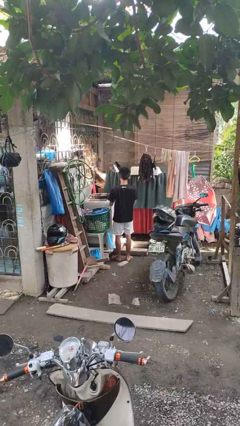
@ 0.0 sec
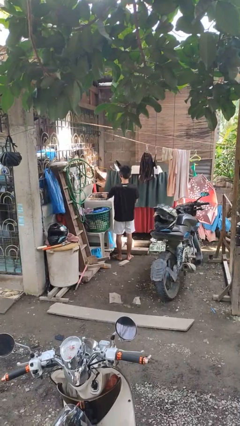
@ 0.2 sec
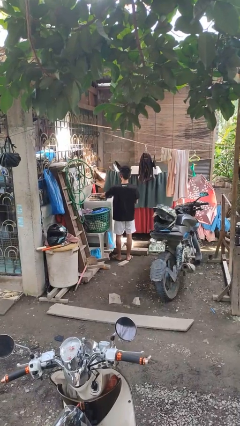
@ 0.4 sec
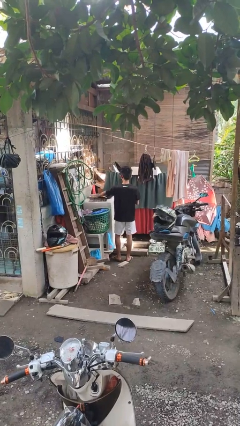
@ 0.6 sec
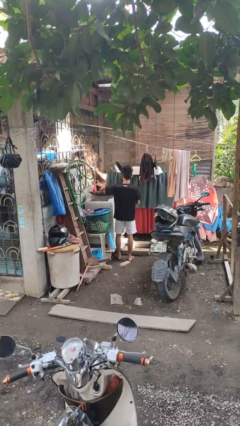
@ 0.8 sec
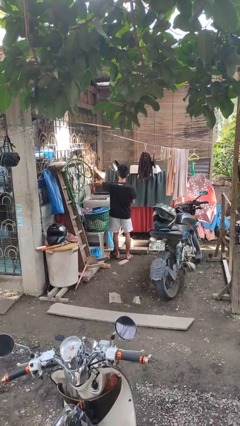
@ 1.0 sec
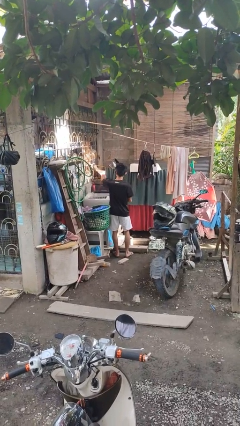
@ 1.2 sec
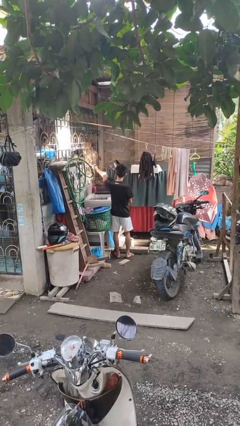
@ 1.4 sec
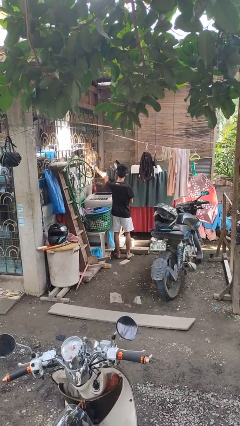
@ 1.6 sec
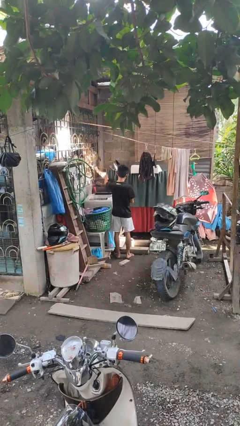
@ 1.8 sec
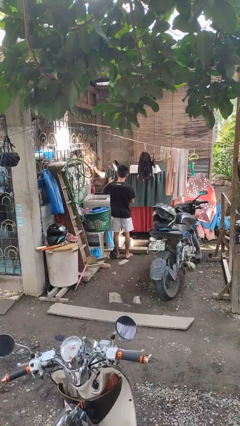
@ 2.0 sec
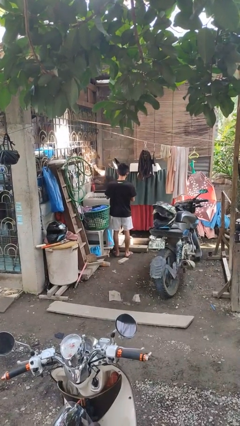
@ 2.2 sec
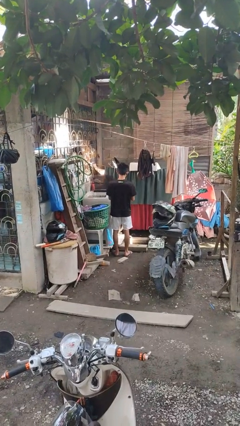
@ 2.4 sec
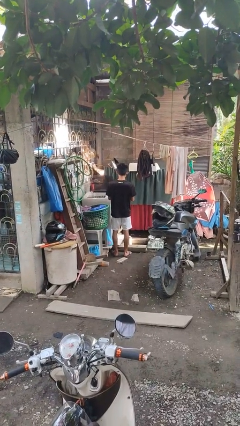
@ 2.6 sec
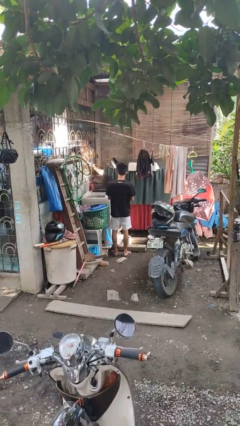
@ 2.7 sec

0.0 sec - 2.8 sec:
person opens clothes washer

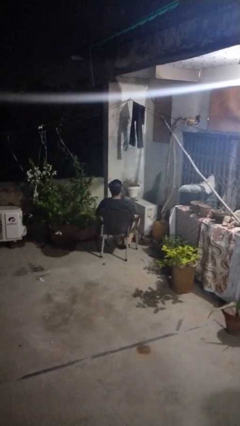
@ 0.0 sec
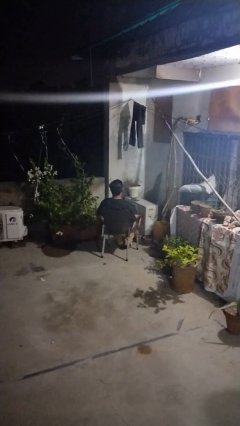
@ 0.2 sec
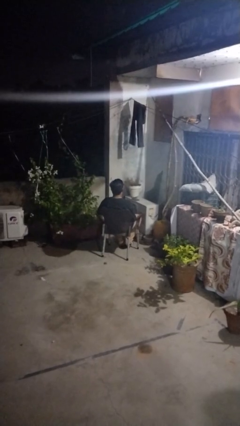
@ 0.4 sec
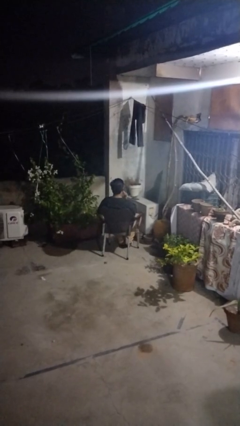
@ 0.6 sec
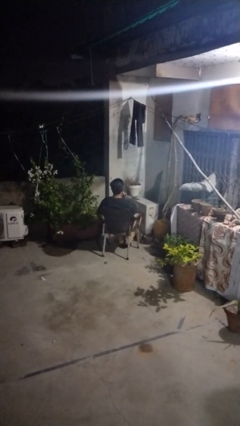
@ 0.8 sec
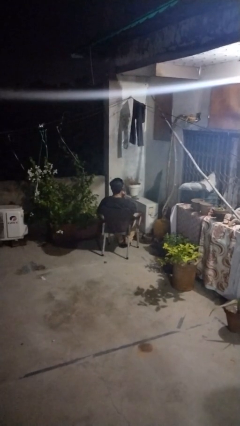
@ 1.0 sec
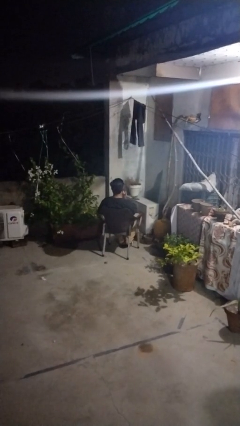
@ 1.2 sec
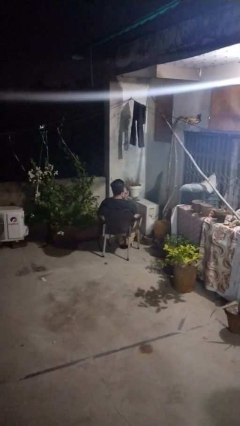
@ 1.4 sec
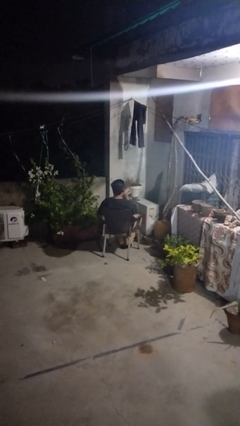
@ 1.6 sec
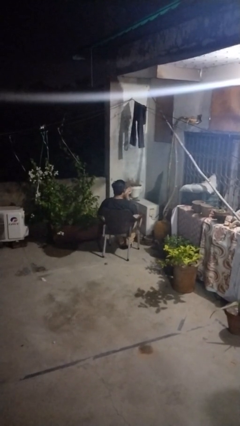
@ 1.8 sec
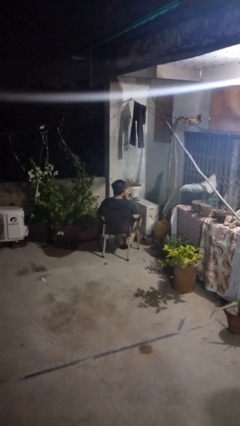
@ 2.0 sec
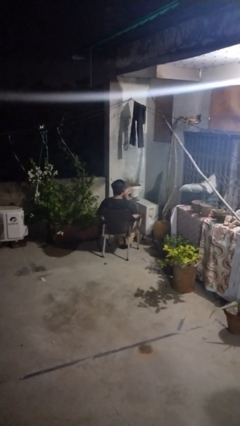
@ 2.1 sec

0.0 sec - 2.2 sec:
person gestures blow kiss

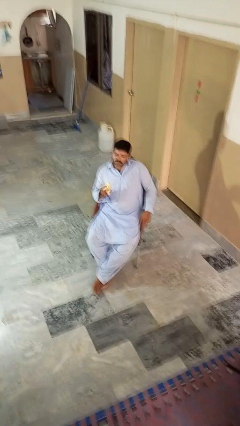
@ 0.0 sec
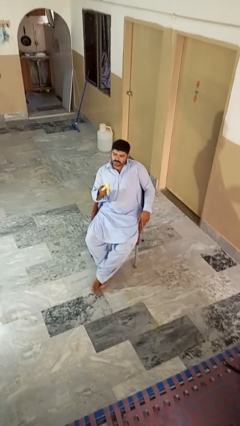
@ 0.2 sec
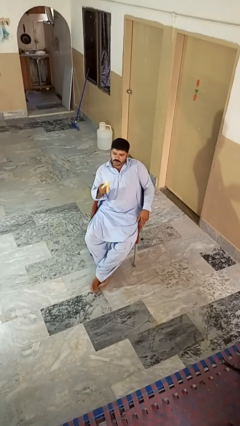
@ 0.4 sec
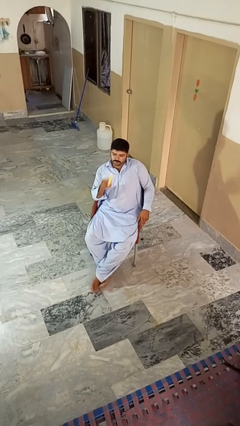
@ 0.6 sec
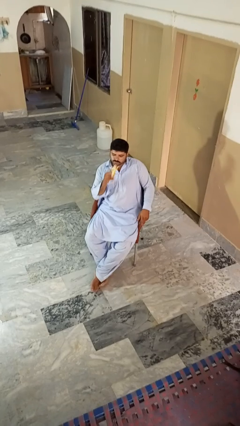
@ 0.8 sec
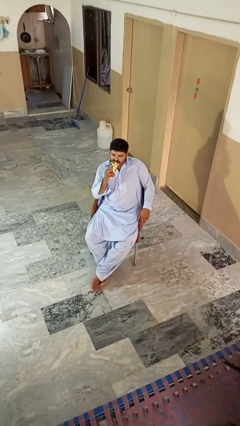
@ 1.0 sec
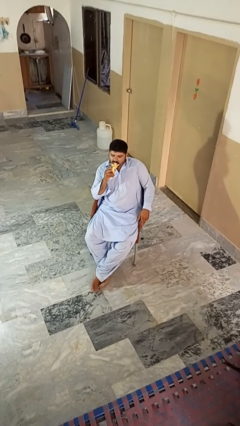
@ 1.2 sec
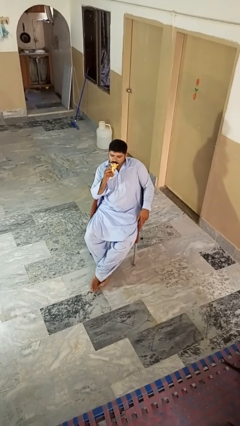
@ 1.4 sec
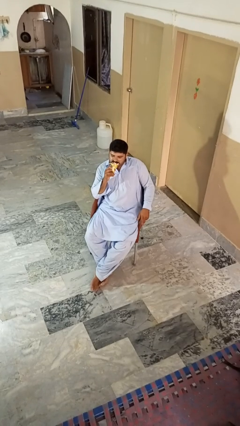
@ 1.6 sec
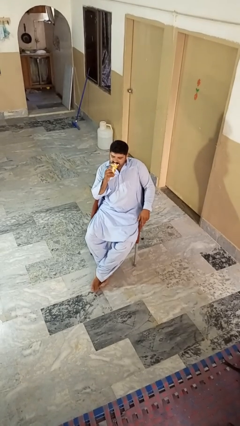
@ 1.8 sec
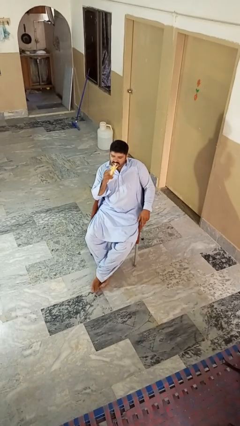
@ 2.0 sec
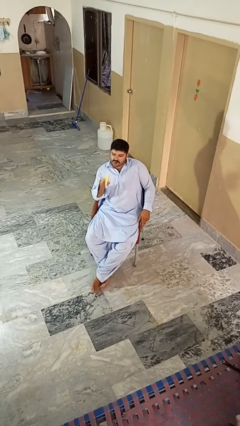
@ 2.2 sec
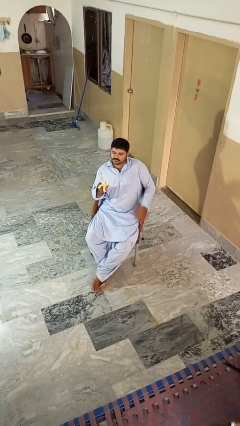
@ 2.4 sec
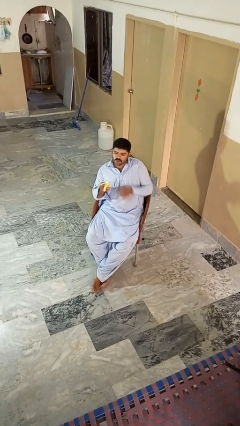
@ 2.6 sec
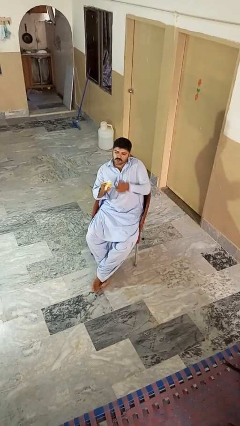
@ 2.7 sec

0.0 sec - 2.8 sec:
person eats banana

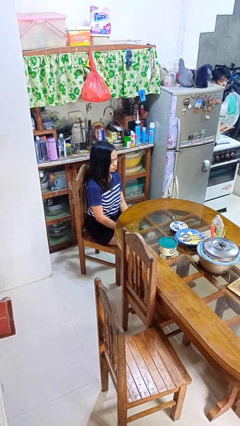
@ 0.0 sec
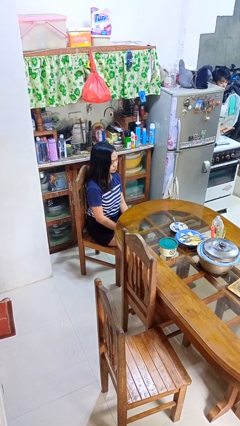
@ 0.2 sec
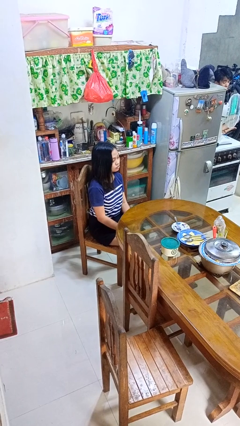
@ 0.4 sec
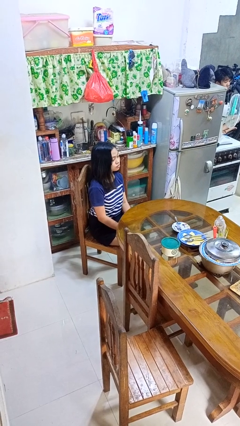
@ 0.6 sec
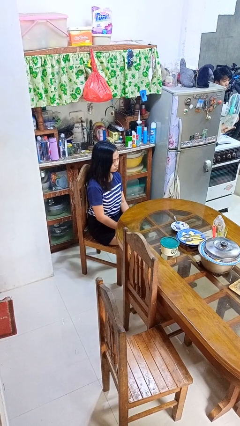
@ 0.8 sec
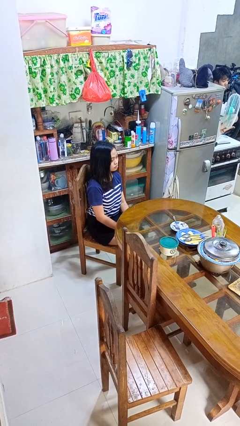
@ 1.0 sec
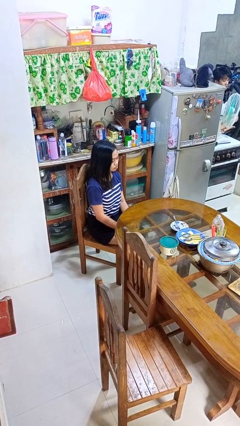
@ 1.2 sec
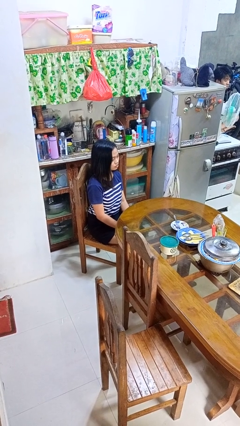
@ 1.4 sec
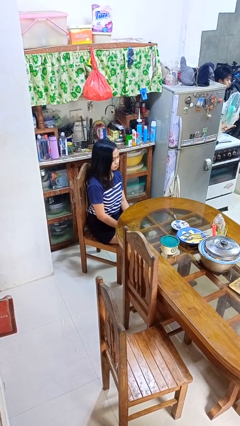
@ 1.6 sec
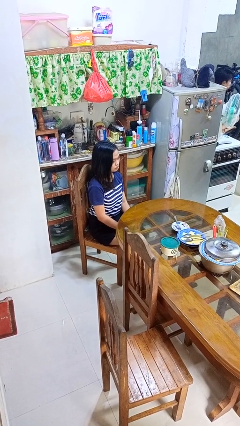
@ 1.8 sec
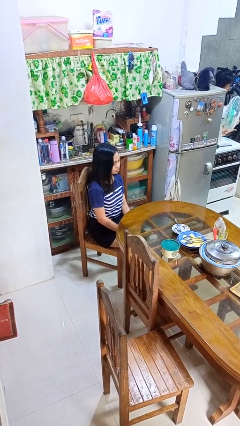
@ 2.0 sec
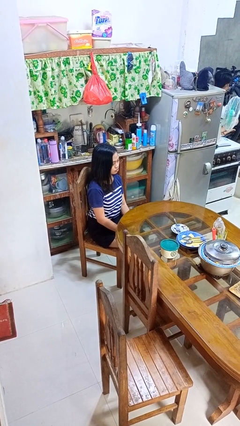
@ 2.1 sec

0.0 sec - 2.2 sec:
person nods head

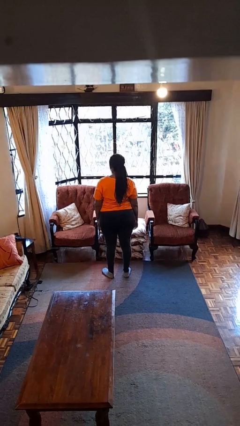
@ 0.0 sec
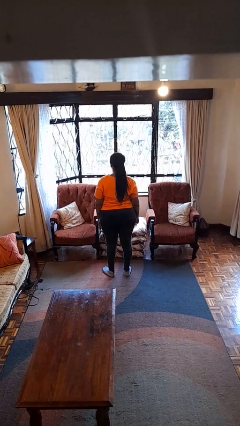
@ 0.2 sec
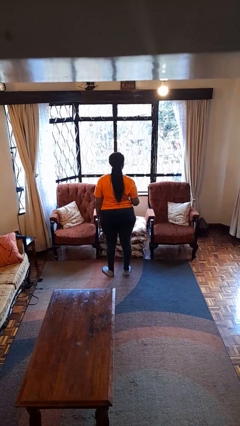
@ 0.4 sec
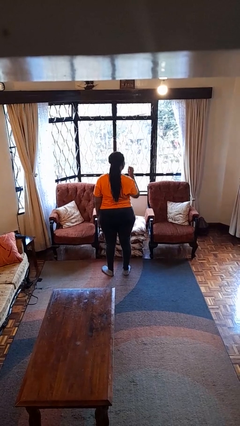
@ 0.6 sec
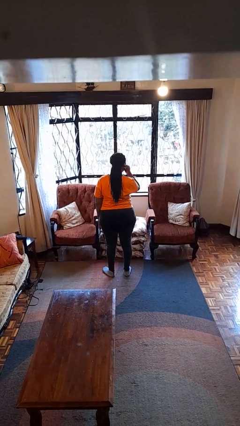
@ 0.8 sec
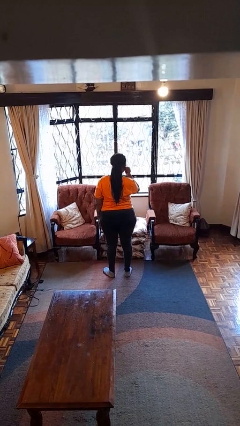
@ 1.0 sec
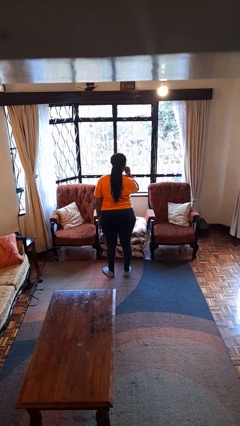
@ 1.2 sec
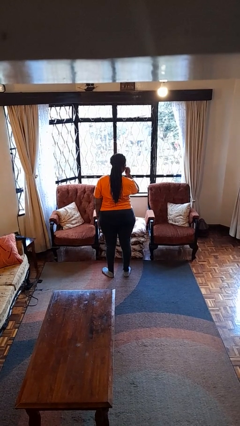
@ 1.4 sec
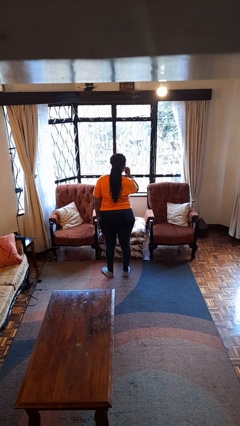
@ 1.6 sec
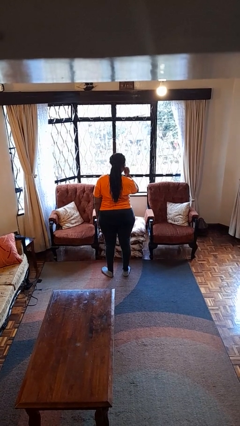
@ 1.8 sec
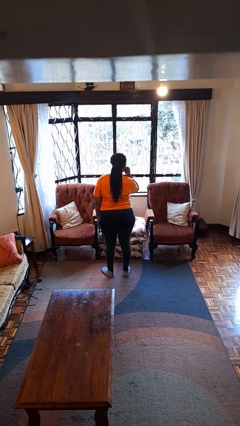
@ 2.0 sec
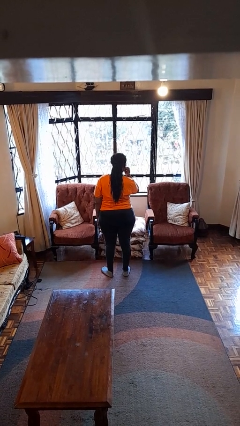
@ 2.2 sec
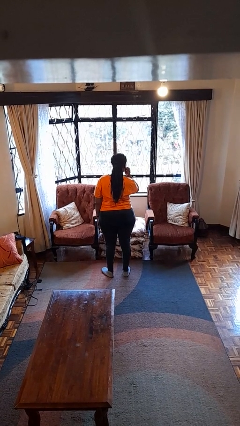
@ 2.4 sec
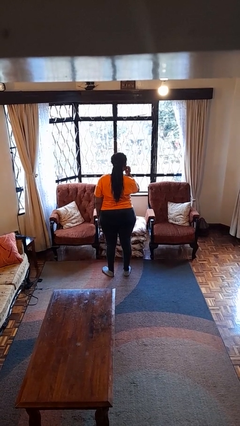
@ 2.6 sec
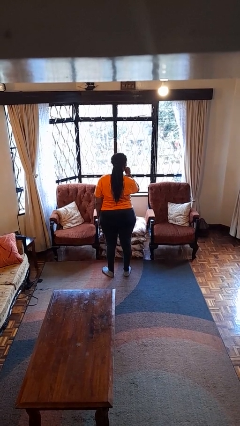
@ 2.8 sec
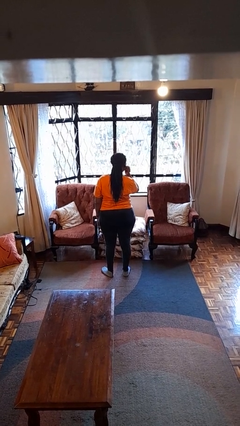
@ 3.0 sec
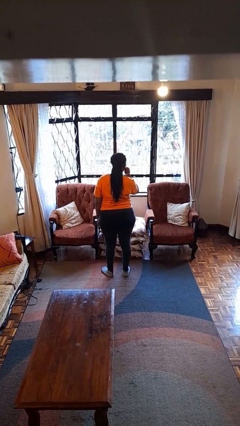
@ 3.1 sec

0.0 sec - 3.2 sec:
person touches earlobe

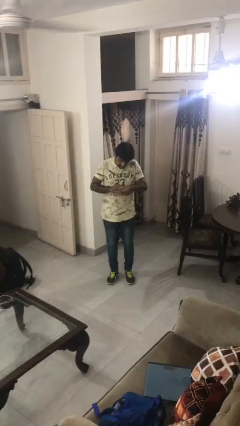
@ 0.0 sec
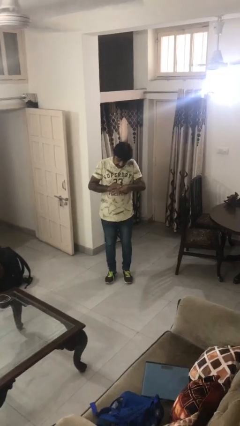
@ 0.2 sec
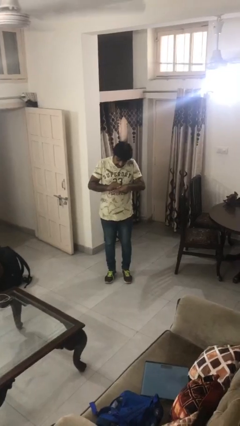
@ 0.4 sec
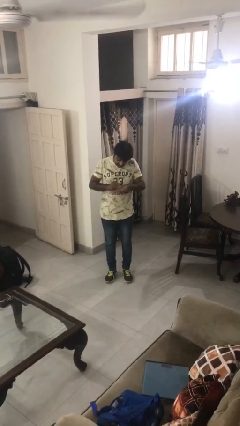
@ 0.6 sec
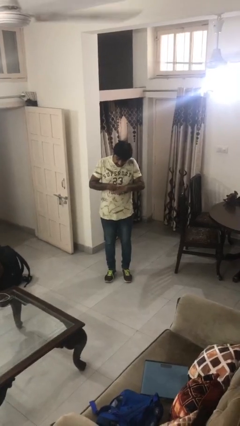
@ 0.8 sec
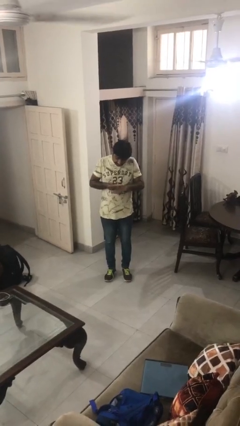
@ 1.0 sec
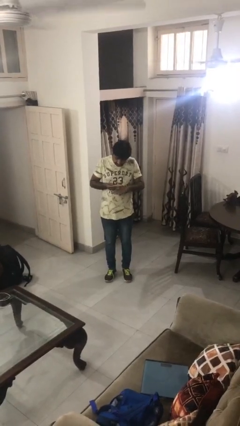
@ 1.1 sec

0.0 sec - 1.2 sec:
person swats bug

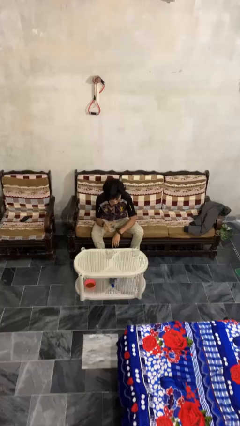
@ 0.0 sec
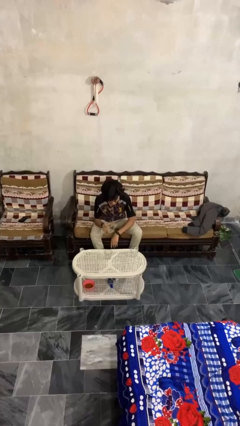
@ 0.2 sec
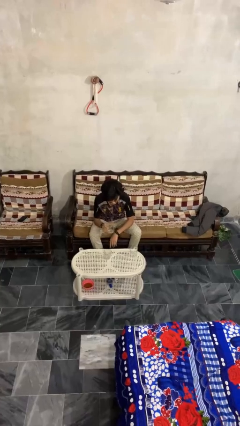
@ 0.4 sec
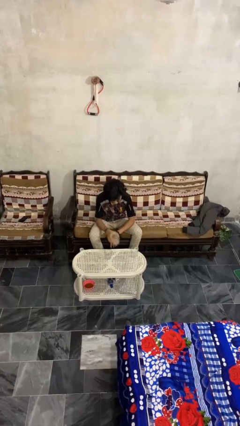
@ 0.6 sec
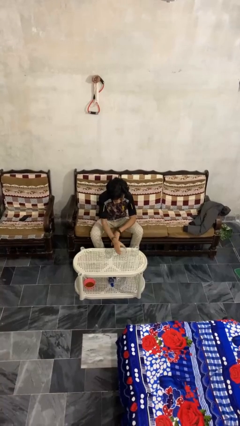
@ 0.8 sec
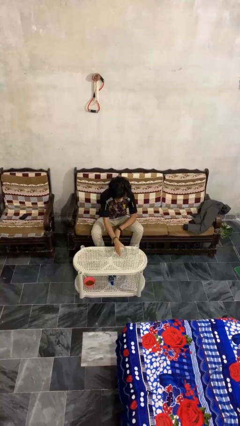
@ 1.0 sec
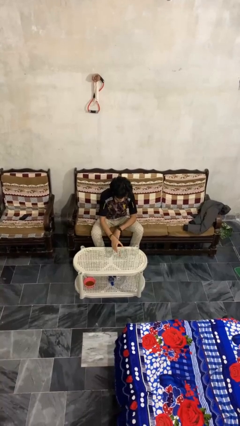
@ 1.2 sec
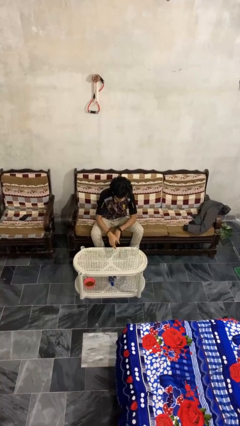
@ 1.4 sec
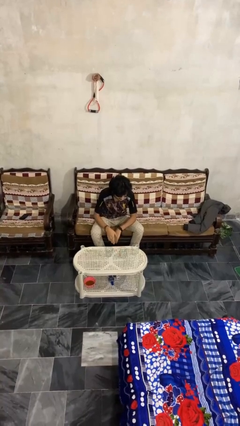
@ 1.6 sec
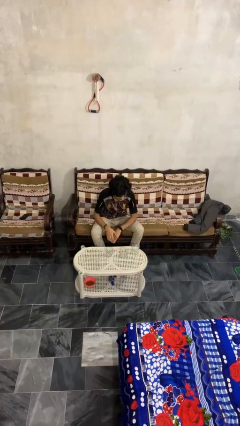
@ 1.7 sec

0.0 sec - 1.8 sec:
person puts down object on table

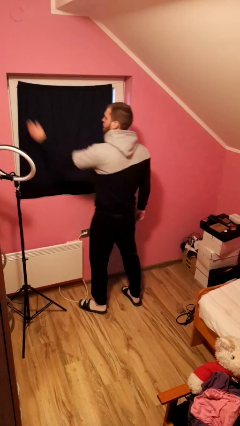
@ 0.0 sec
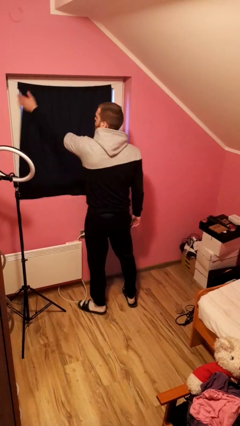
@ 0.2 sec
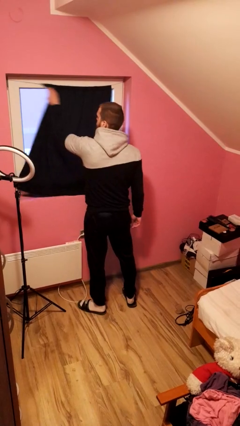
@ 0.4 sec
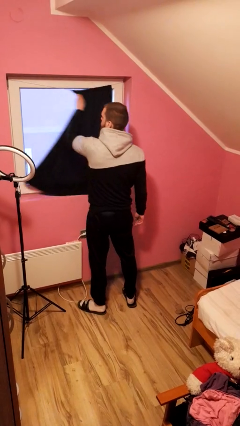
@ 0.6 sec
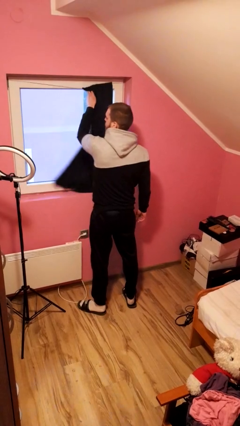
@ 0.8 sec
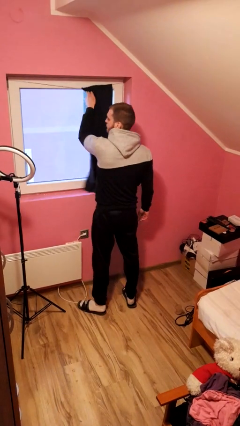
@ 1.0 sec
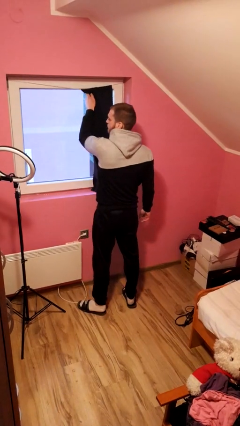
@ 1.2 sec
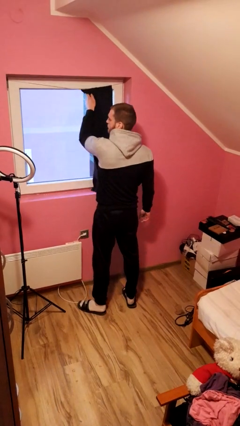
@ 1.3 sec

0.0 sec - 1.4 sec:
person opens curtains
